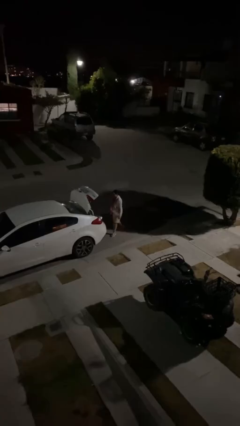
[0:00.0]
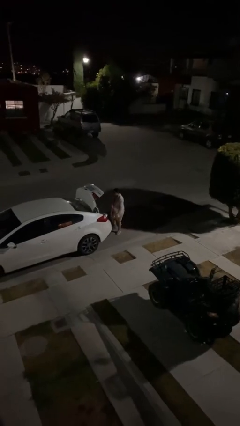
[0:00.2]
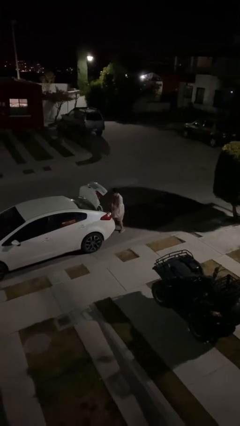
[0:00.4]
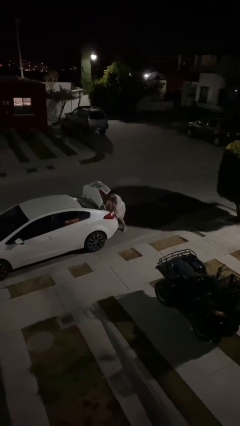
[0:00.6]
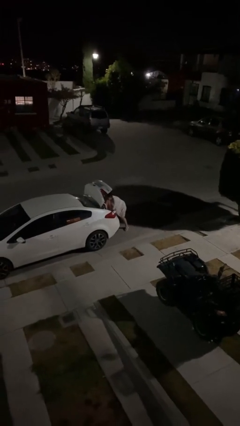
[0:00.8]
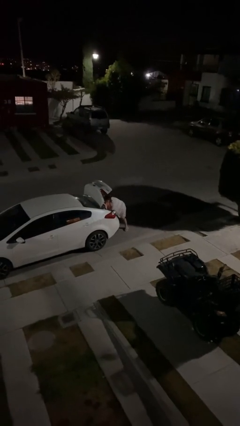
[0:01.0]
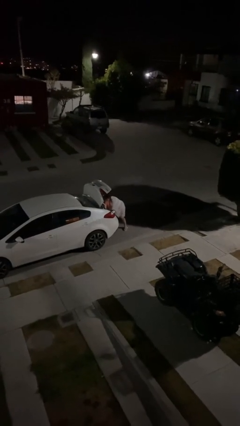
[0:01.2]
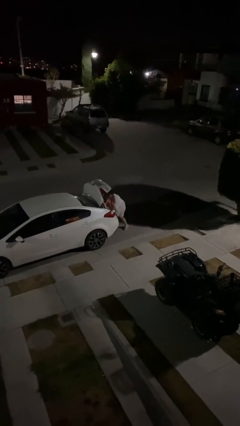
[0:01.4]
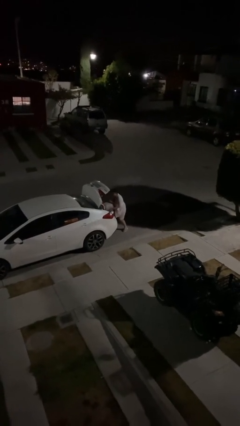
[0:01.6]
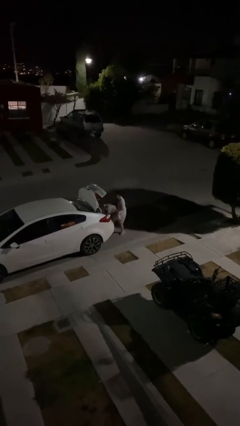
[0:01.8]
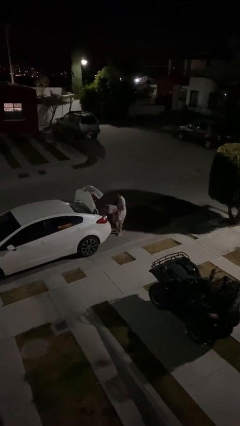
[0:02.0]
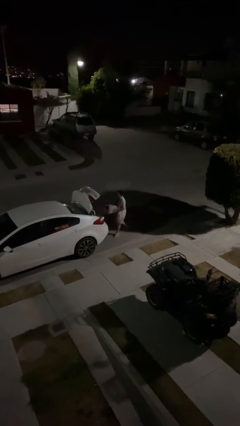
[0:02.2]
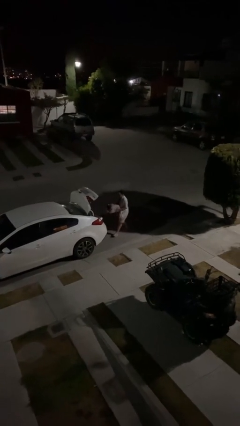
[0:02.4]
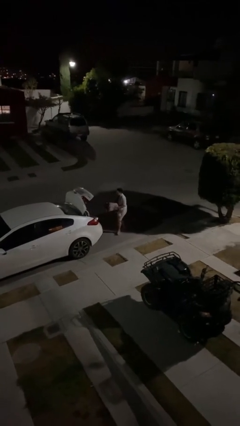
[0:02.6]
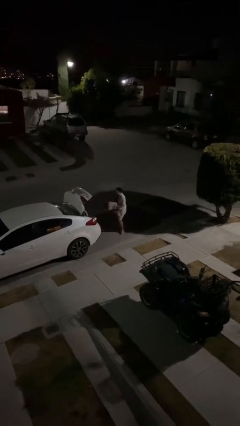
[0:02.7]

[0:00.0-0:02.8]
person unloads car

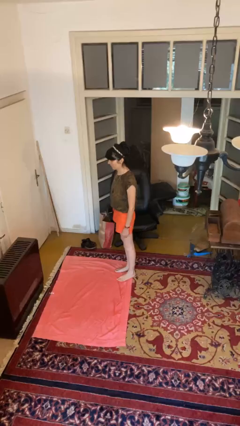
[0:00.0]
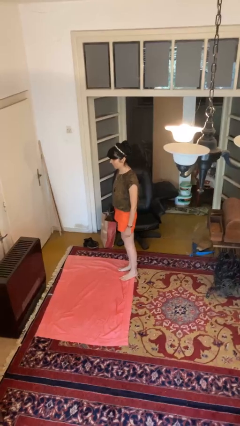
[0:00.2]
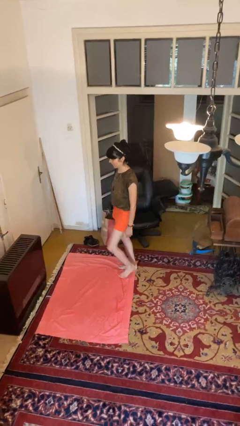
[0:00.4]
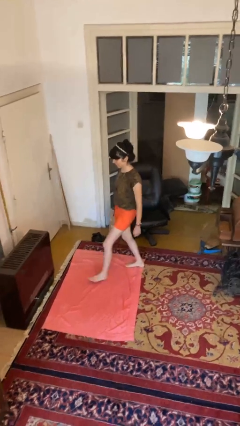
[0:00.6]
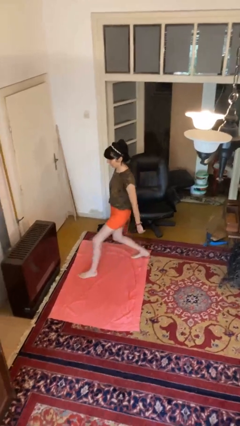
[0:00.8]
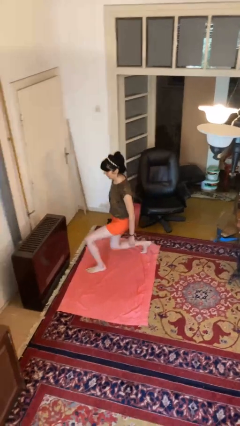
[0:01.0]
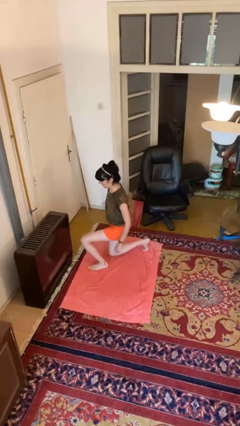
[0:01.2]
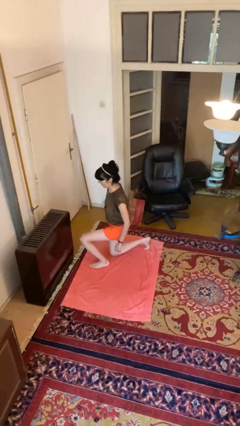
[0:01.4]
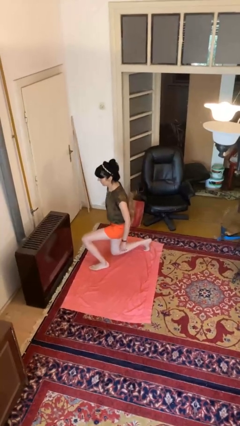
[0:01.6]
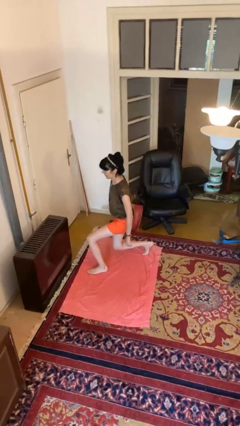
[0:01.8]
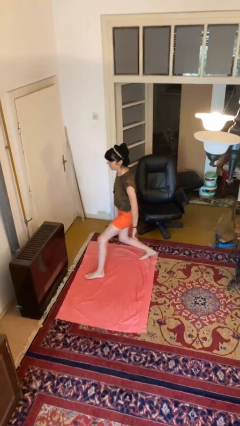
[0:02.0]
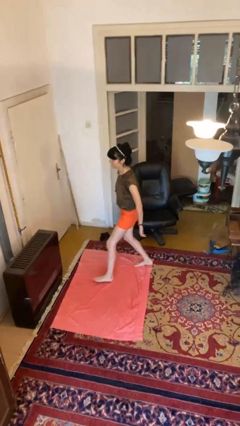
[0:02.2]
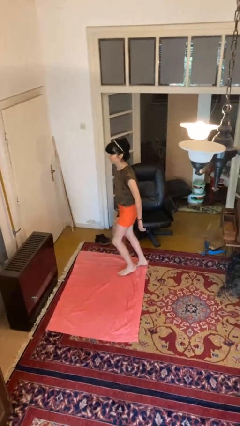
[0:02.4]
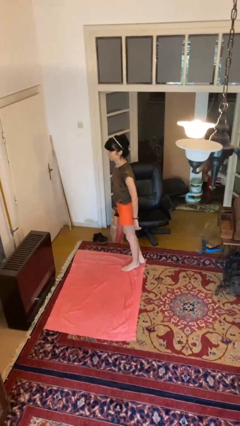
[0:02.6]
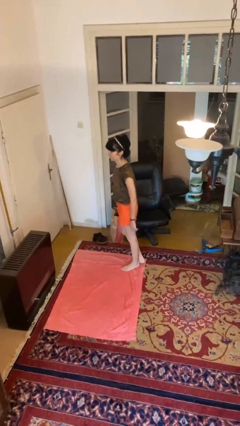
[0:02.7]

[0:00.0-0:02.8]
person exercises with lunges

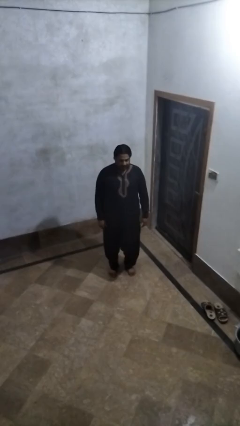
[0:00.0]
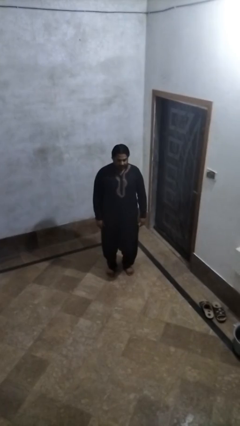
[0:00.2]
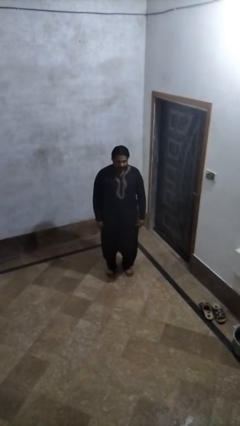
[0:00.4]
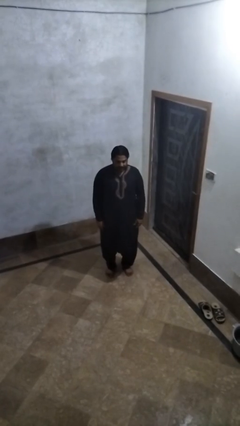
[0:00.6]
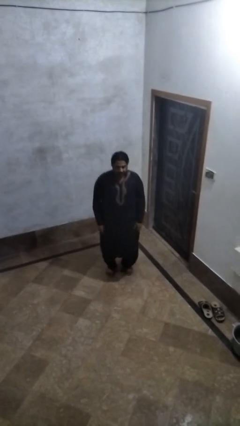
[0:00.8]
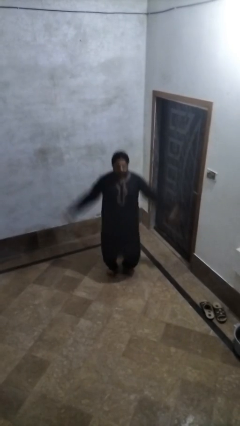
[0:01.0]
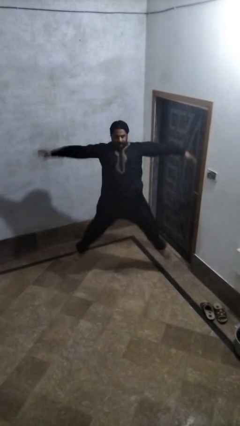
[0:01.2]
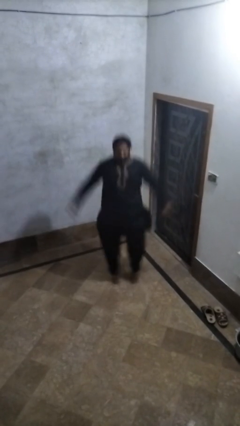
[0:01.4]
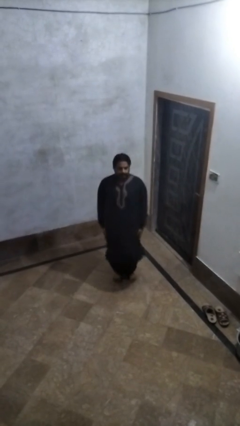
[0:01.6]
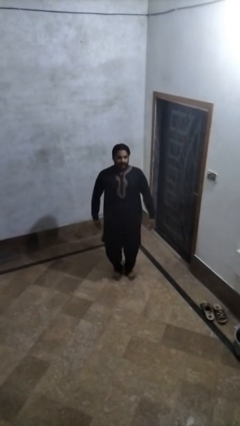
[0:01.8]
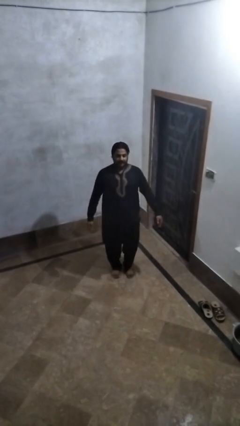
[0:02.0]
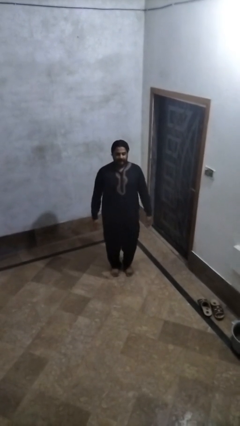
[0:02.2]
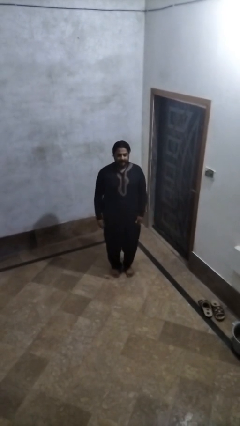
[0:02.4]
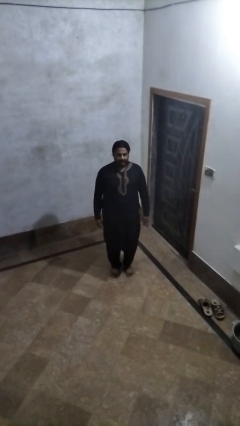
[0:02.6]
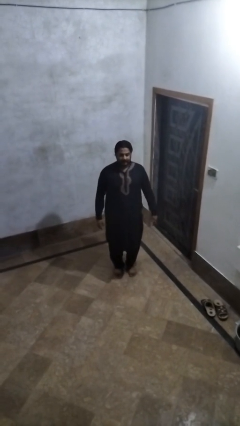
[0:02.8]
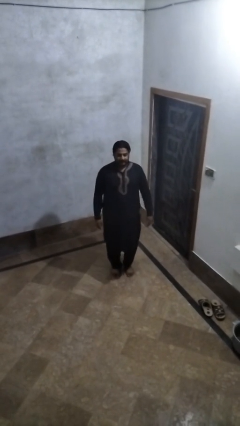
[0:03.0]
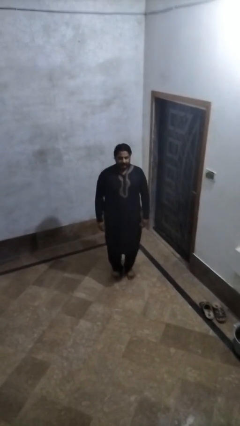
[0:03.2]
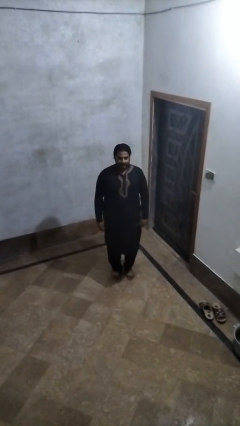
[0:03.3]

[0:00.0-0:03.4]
person exercises with jumping jacks

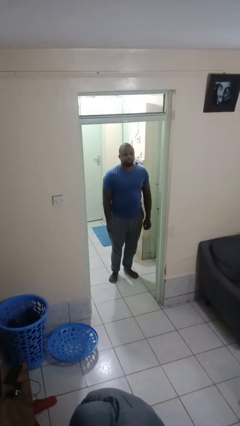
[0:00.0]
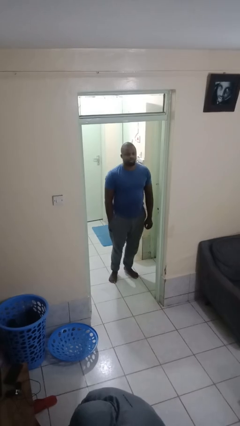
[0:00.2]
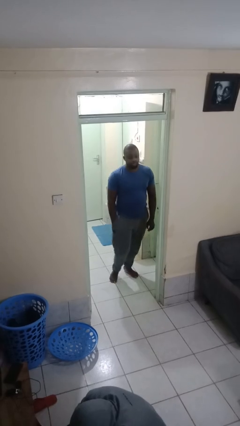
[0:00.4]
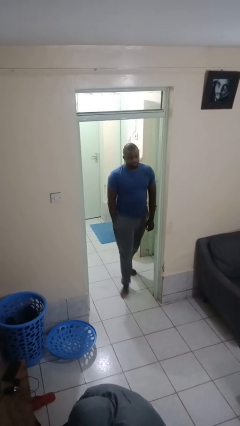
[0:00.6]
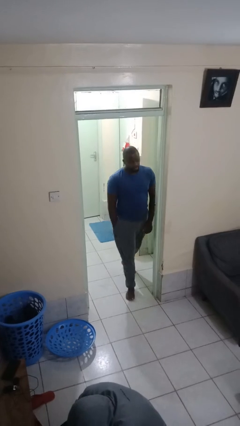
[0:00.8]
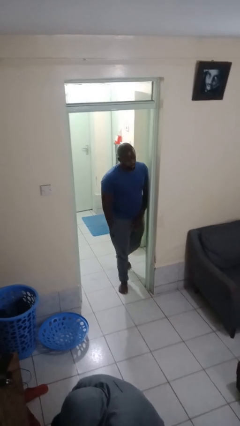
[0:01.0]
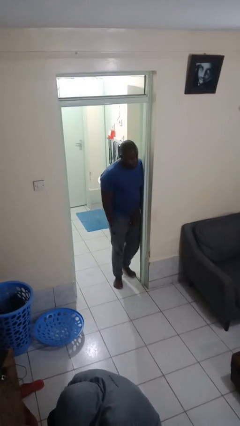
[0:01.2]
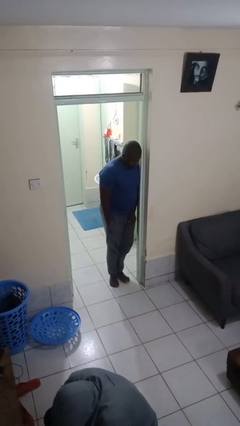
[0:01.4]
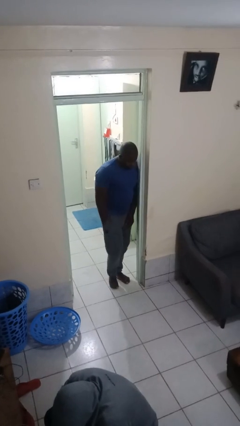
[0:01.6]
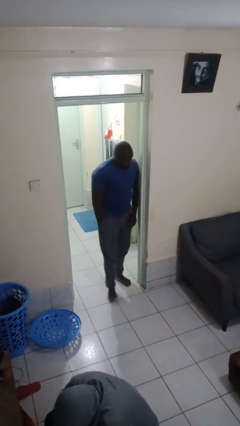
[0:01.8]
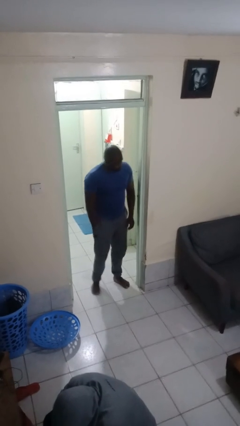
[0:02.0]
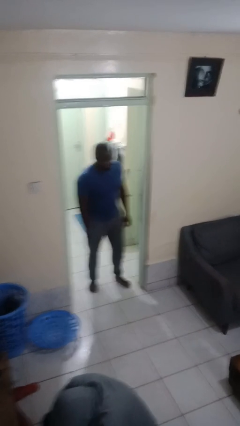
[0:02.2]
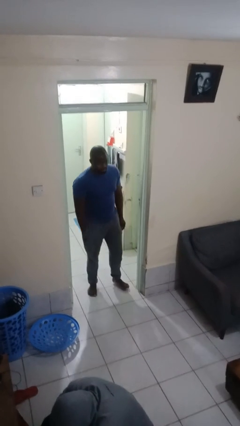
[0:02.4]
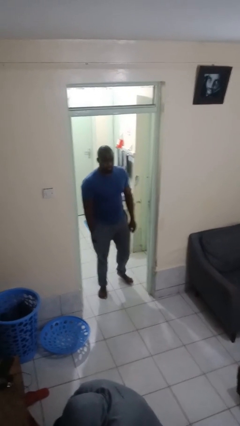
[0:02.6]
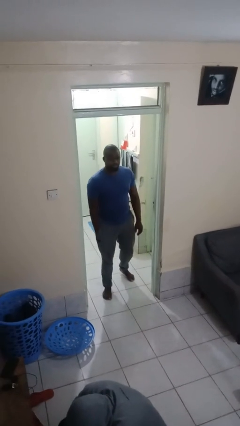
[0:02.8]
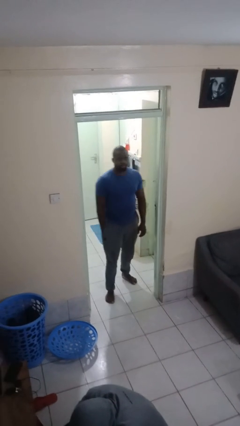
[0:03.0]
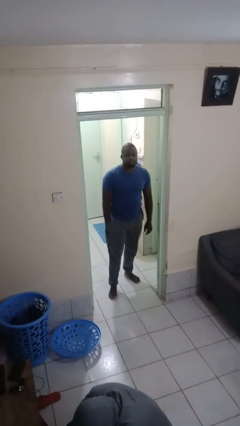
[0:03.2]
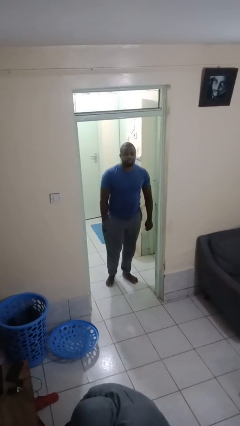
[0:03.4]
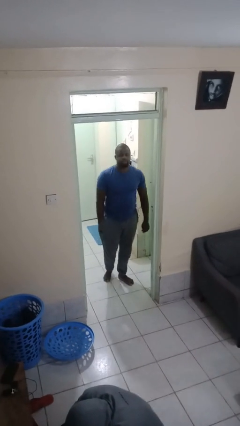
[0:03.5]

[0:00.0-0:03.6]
person bumps into wall

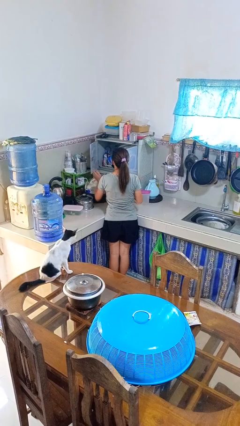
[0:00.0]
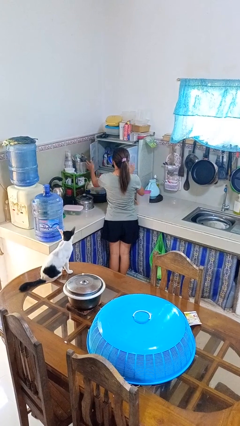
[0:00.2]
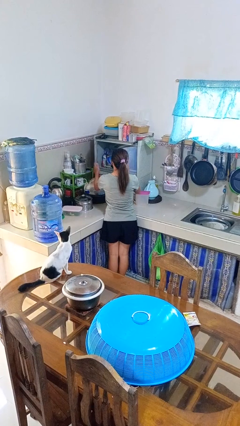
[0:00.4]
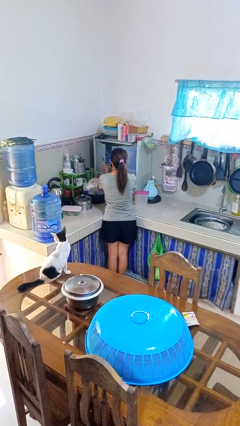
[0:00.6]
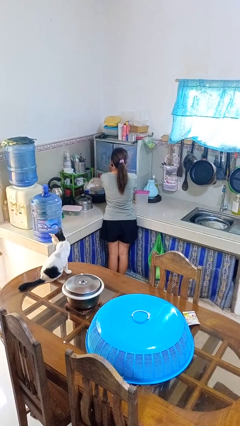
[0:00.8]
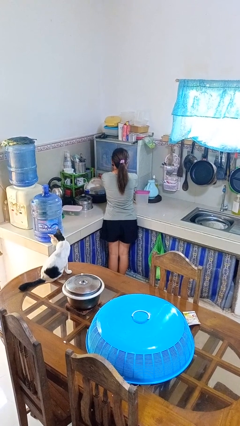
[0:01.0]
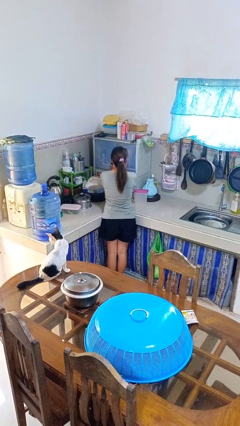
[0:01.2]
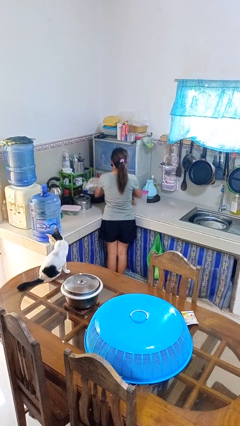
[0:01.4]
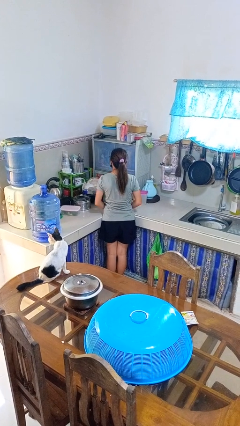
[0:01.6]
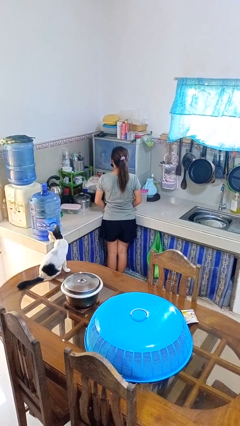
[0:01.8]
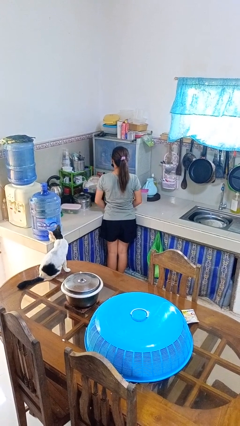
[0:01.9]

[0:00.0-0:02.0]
person closes kitchen drawer

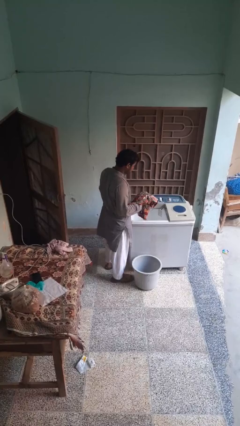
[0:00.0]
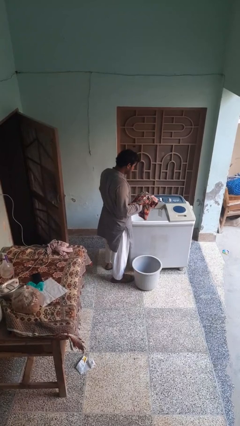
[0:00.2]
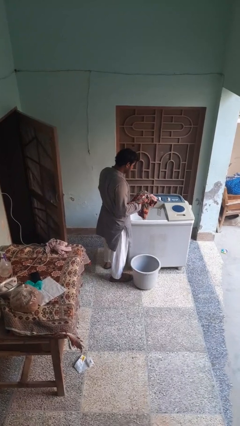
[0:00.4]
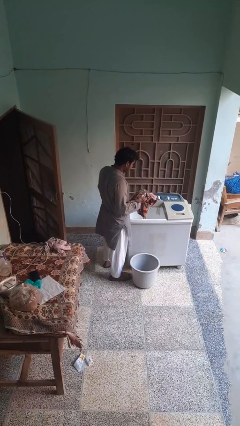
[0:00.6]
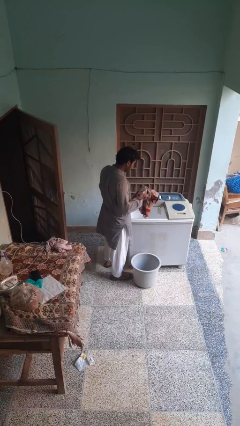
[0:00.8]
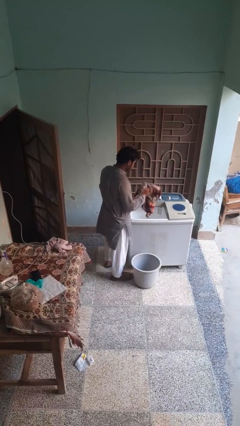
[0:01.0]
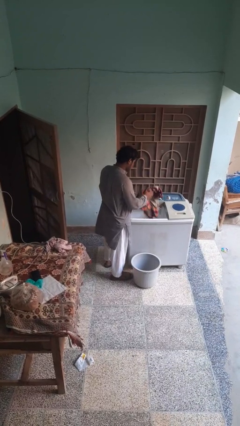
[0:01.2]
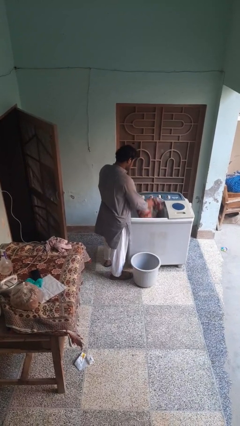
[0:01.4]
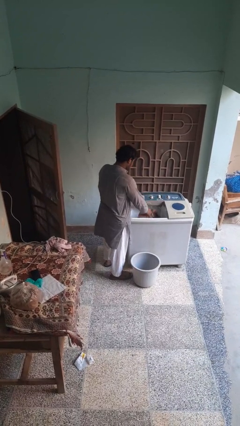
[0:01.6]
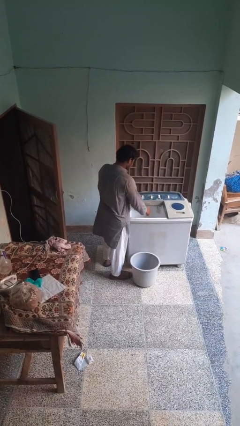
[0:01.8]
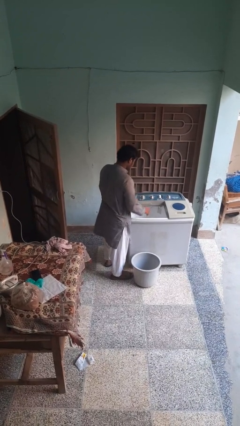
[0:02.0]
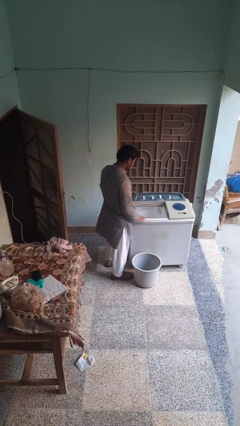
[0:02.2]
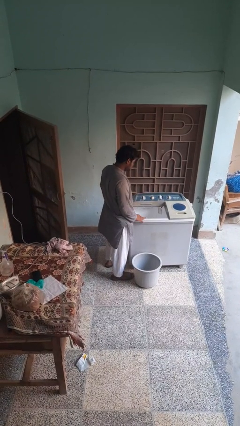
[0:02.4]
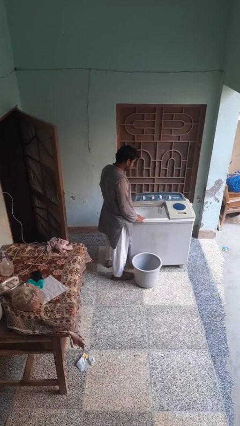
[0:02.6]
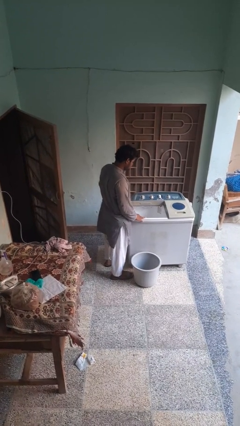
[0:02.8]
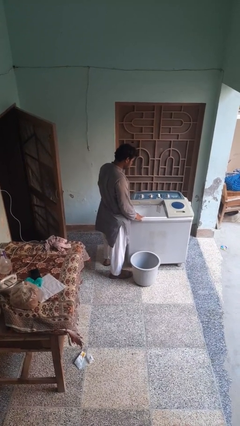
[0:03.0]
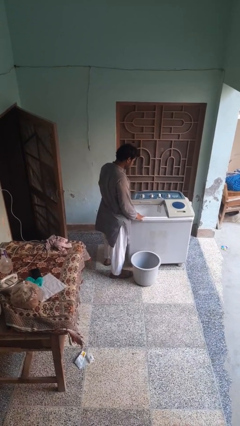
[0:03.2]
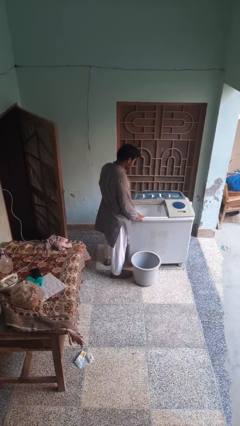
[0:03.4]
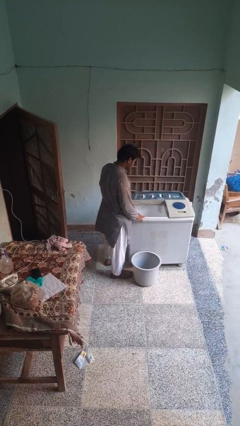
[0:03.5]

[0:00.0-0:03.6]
person loads clotheswasher
